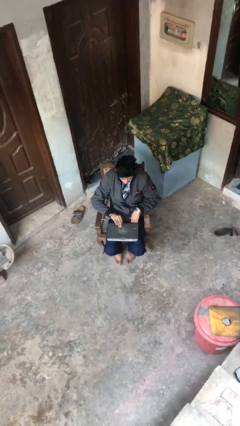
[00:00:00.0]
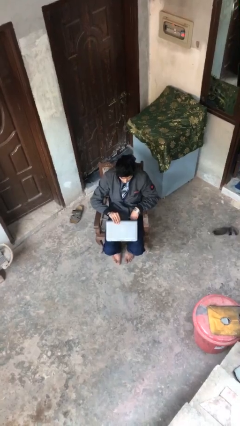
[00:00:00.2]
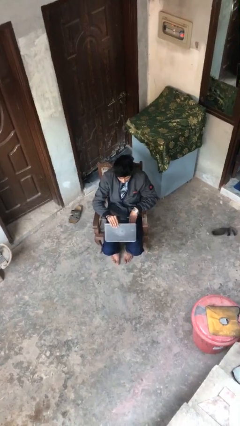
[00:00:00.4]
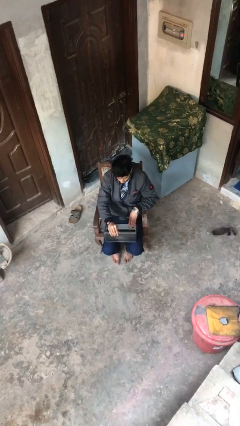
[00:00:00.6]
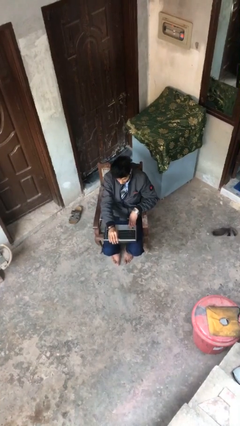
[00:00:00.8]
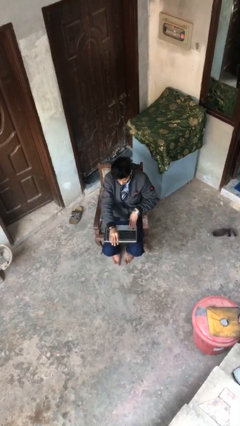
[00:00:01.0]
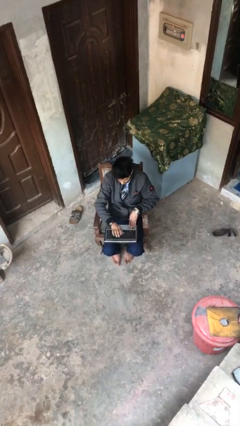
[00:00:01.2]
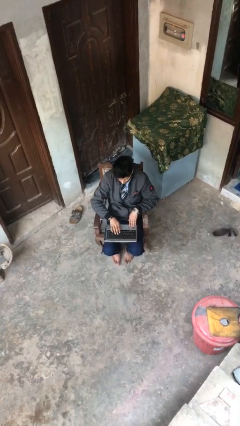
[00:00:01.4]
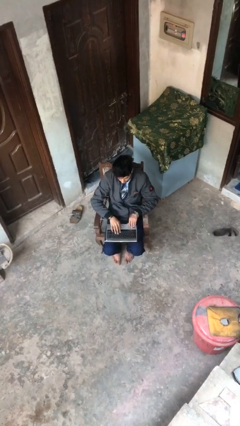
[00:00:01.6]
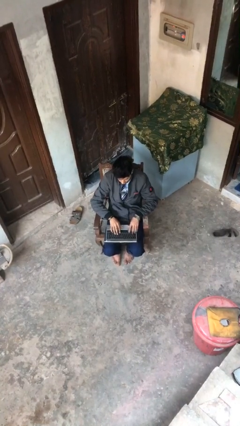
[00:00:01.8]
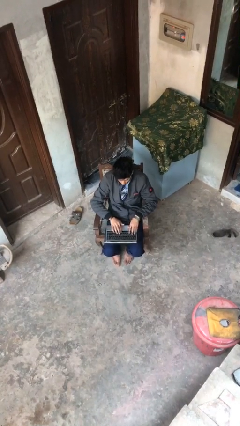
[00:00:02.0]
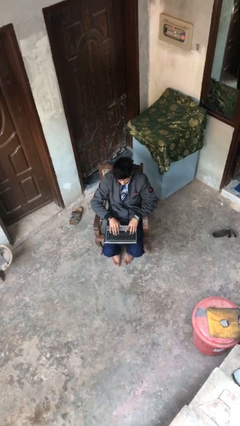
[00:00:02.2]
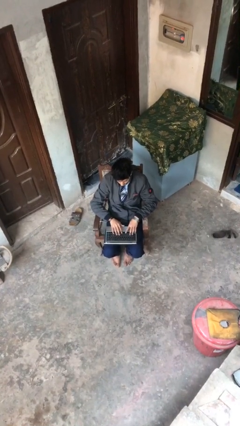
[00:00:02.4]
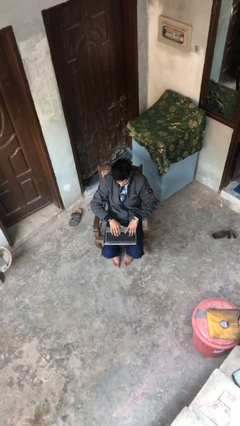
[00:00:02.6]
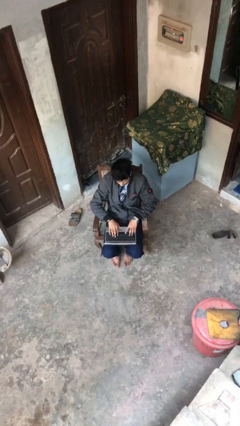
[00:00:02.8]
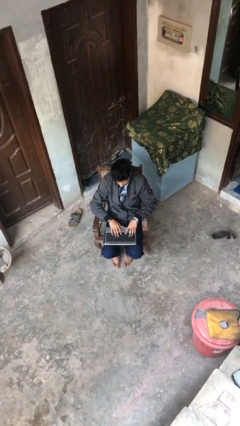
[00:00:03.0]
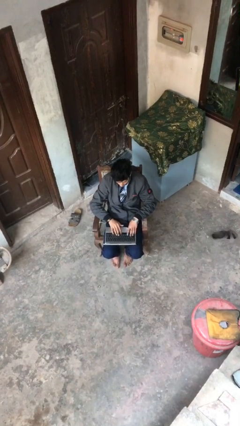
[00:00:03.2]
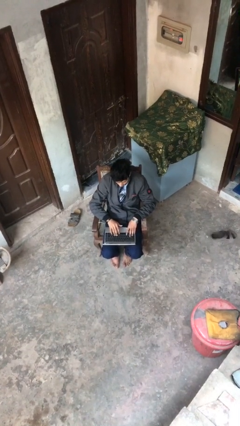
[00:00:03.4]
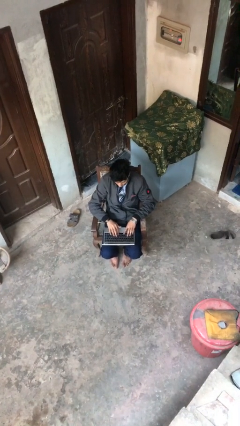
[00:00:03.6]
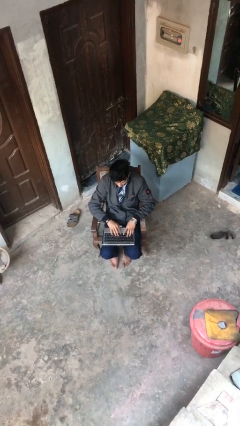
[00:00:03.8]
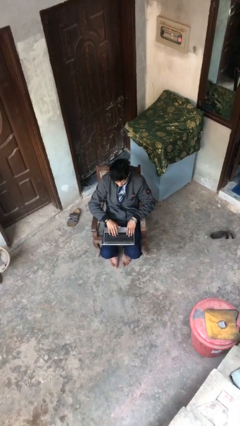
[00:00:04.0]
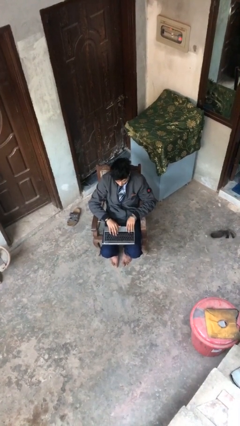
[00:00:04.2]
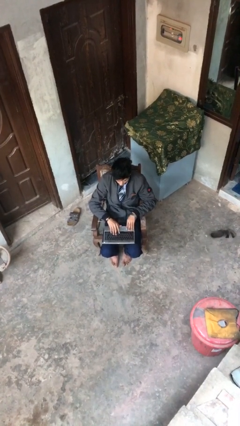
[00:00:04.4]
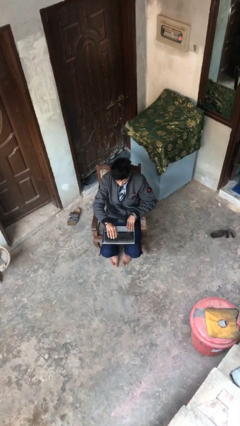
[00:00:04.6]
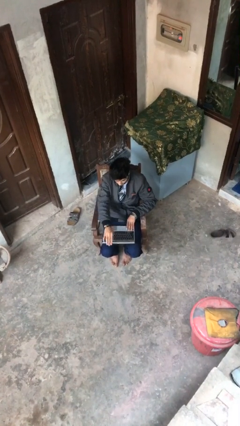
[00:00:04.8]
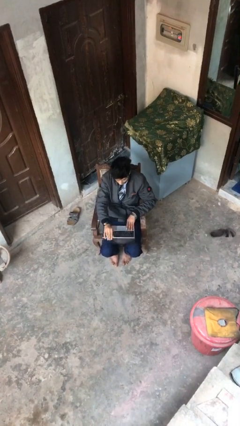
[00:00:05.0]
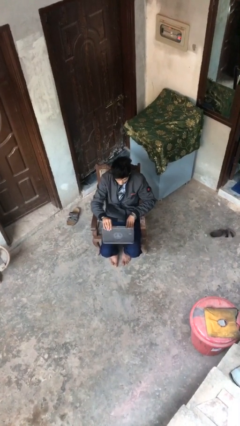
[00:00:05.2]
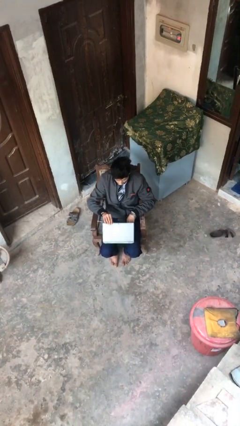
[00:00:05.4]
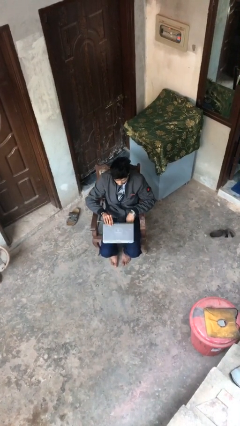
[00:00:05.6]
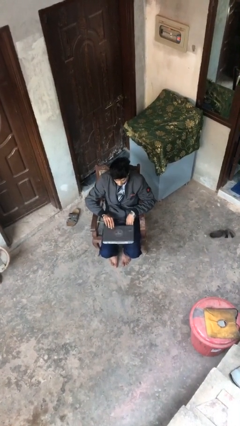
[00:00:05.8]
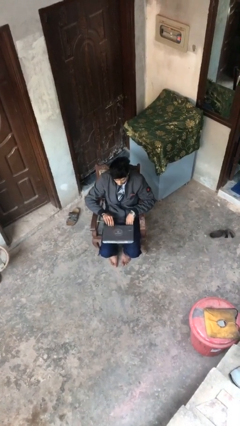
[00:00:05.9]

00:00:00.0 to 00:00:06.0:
person interacts with laptop

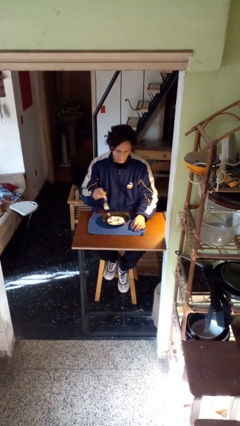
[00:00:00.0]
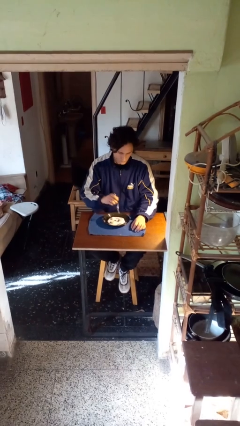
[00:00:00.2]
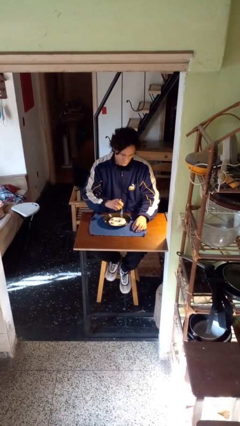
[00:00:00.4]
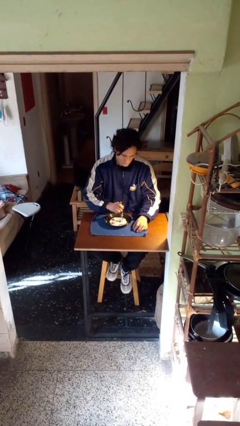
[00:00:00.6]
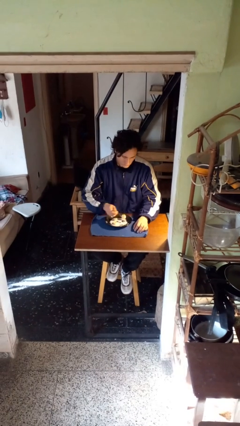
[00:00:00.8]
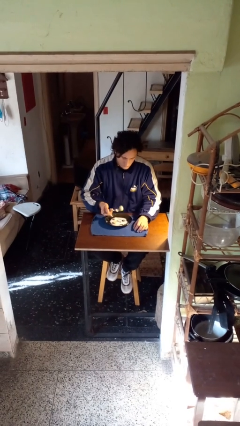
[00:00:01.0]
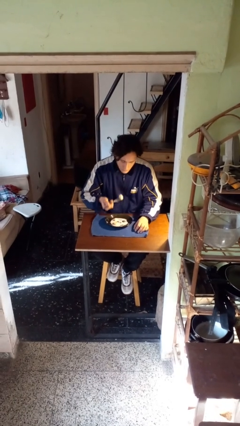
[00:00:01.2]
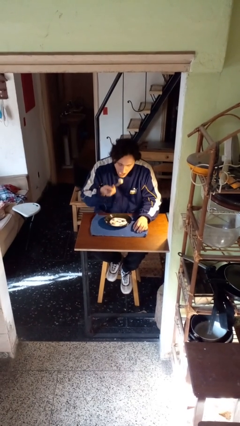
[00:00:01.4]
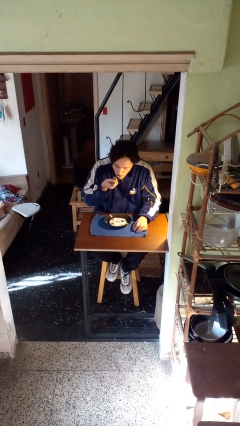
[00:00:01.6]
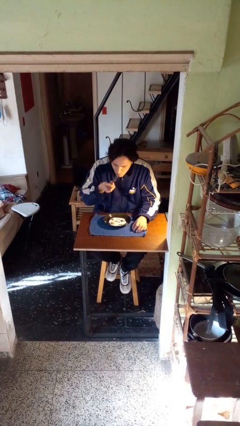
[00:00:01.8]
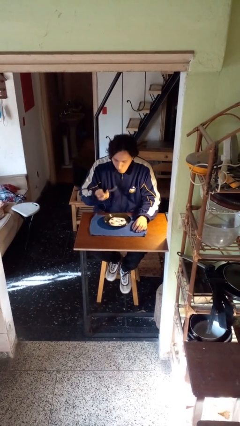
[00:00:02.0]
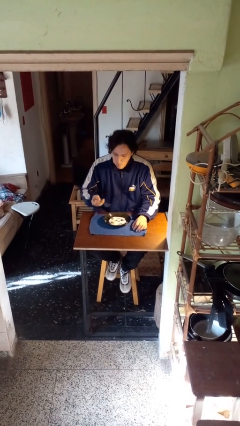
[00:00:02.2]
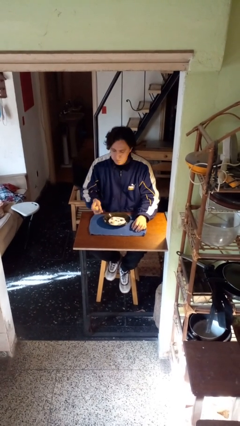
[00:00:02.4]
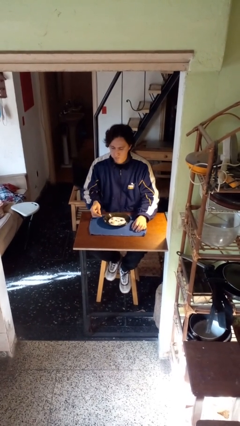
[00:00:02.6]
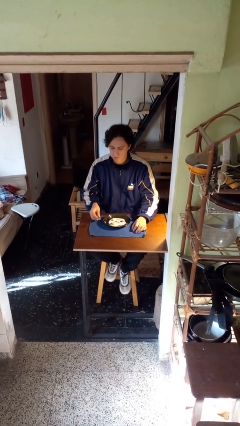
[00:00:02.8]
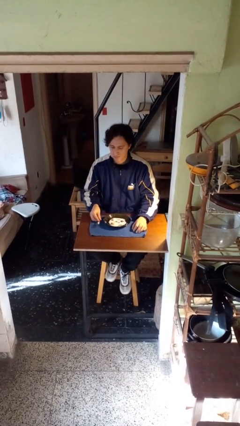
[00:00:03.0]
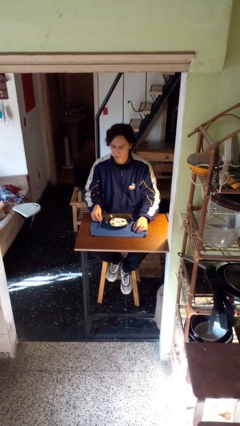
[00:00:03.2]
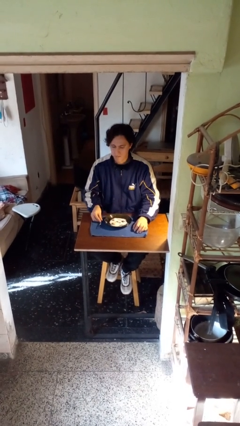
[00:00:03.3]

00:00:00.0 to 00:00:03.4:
person eats with utensil

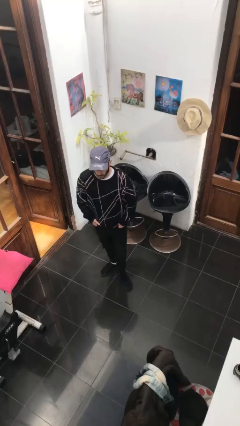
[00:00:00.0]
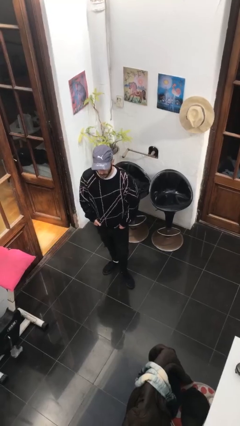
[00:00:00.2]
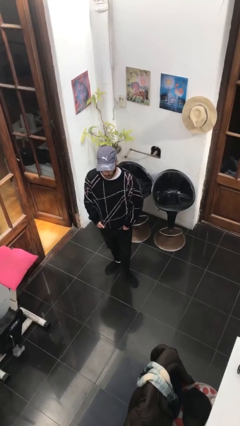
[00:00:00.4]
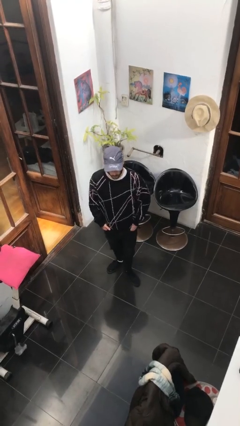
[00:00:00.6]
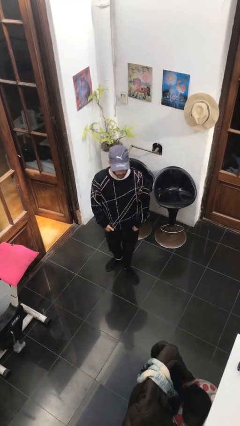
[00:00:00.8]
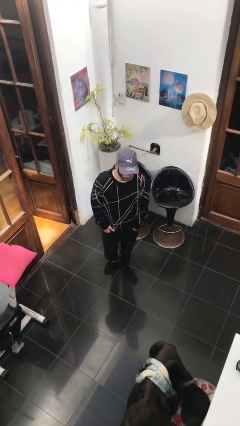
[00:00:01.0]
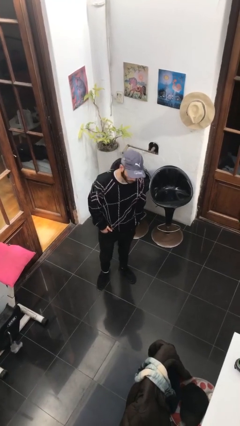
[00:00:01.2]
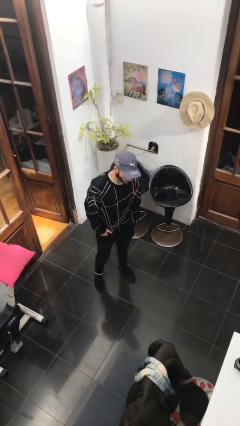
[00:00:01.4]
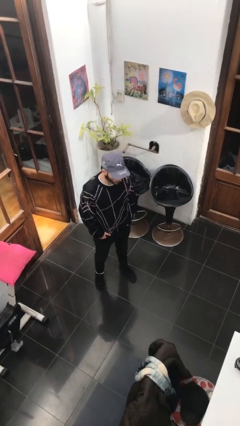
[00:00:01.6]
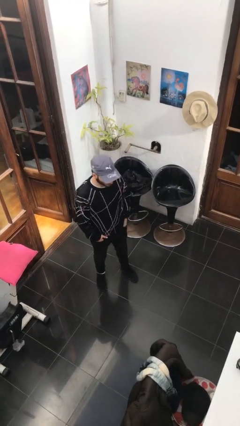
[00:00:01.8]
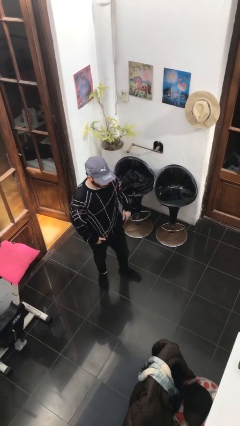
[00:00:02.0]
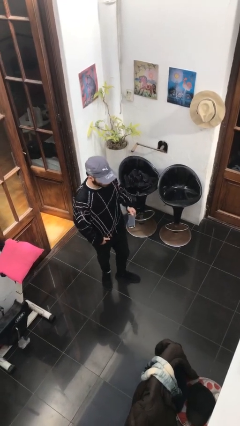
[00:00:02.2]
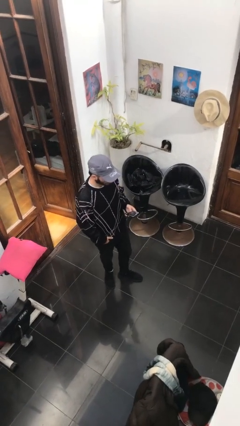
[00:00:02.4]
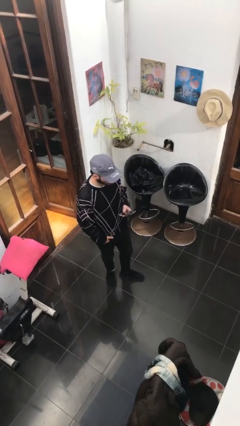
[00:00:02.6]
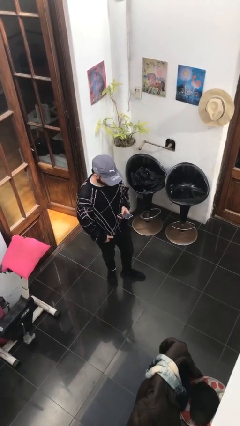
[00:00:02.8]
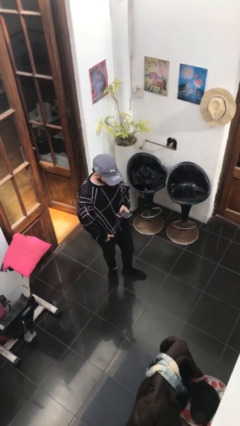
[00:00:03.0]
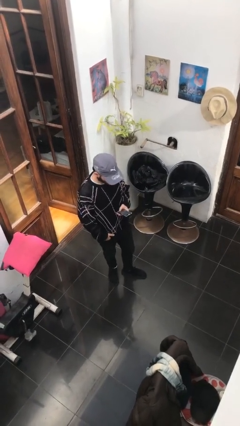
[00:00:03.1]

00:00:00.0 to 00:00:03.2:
person takes phone from pocket

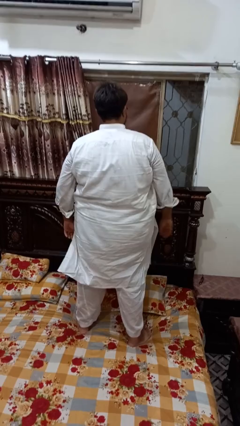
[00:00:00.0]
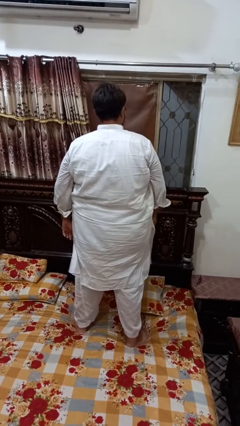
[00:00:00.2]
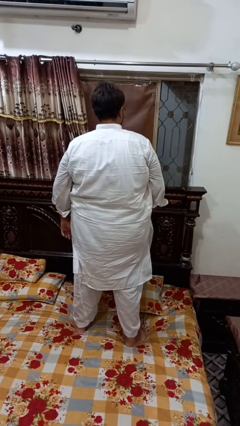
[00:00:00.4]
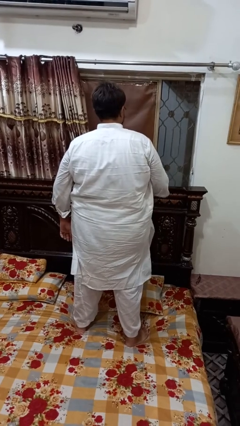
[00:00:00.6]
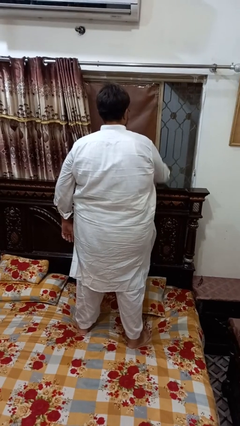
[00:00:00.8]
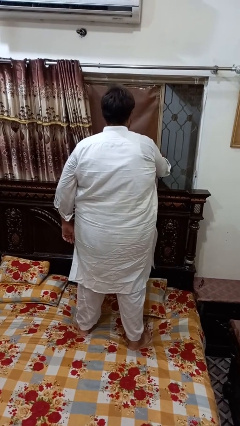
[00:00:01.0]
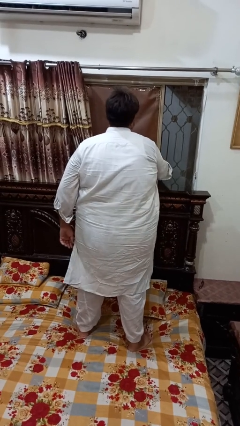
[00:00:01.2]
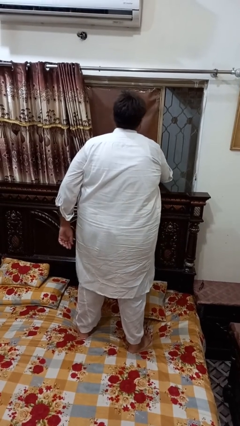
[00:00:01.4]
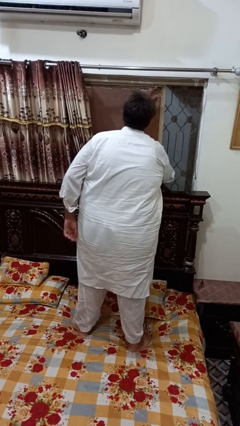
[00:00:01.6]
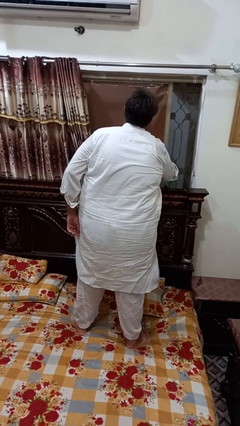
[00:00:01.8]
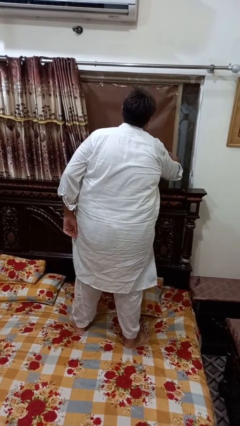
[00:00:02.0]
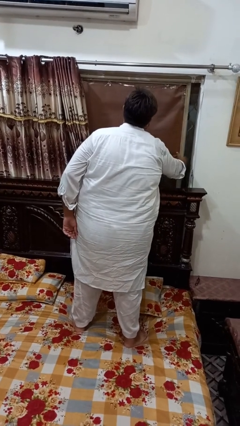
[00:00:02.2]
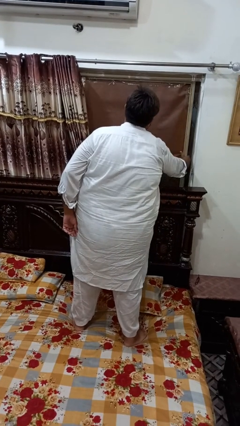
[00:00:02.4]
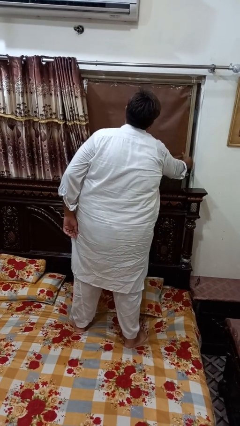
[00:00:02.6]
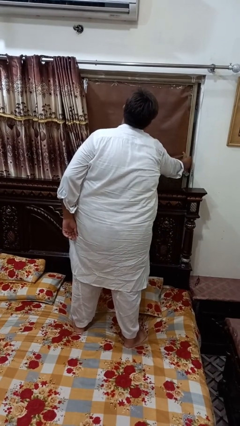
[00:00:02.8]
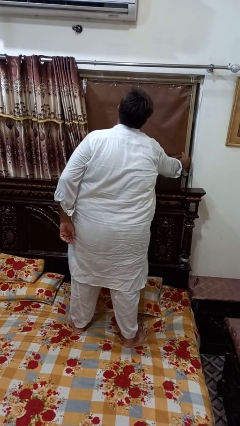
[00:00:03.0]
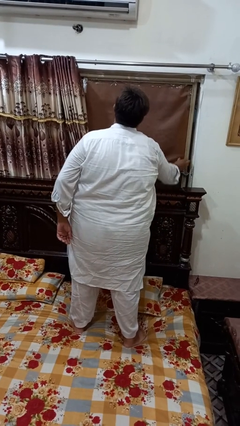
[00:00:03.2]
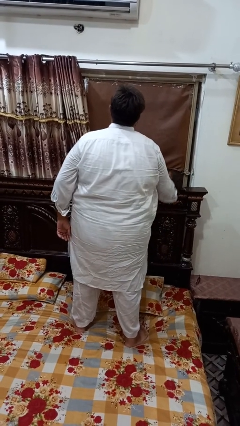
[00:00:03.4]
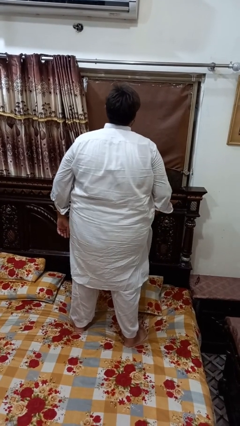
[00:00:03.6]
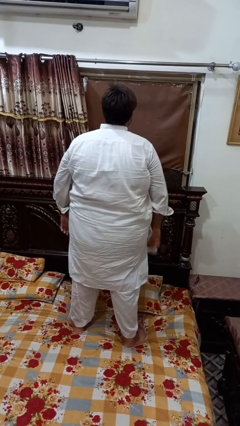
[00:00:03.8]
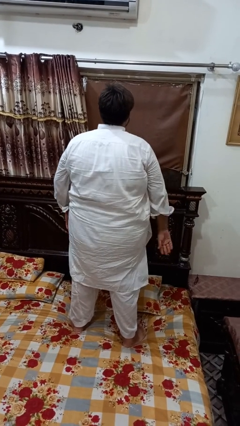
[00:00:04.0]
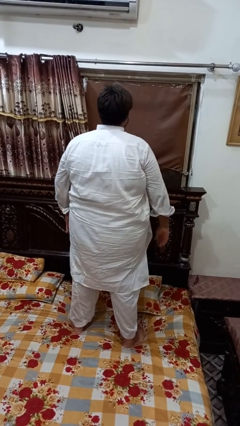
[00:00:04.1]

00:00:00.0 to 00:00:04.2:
person closes home window

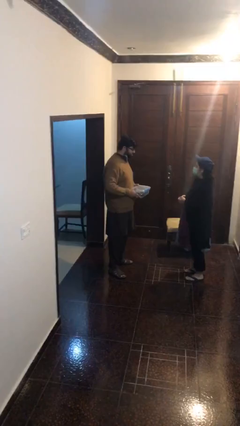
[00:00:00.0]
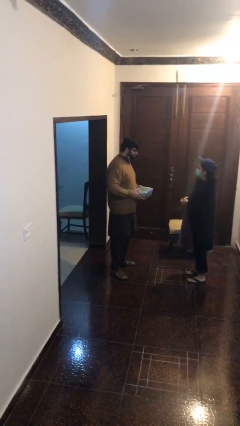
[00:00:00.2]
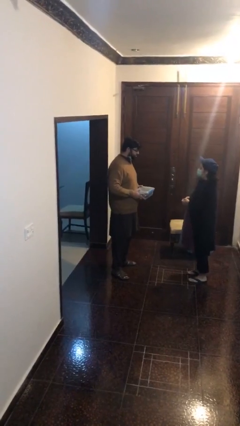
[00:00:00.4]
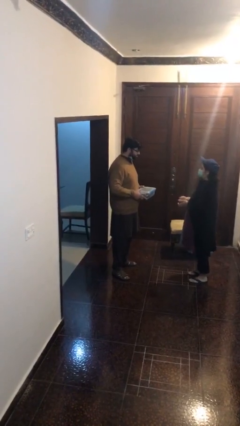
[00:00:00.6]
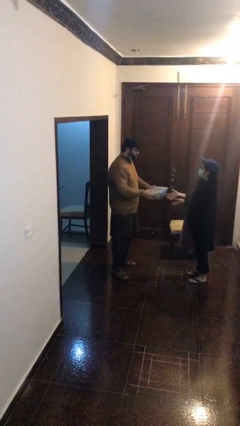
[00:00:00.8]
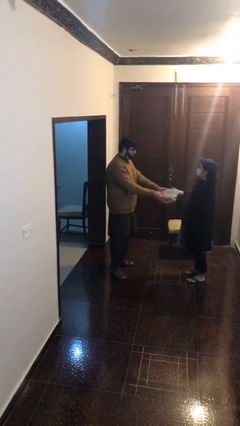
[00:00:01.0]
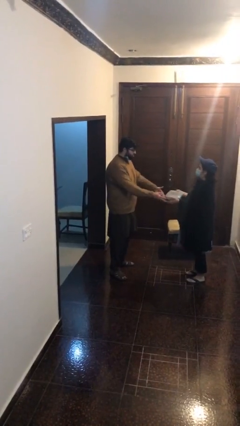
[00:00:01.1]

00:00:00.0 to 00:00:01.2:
person transfers object to person
